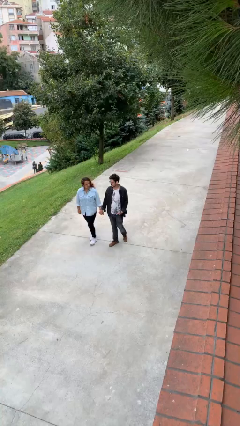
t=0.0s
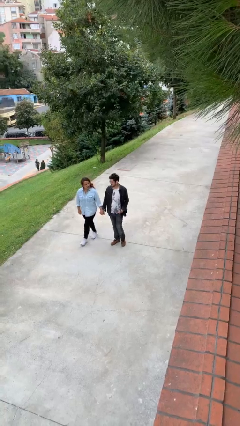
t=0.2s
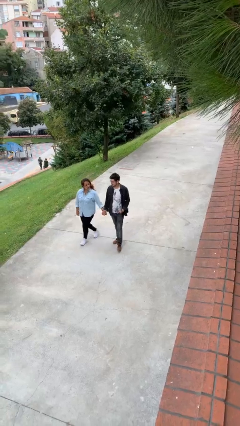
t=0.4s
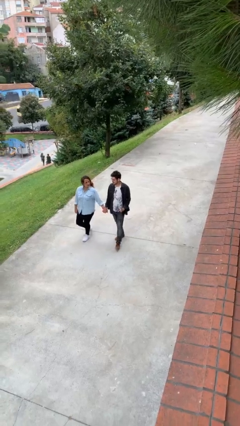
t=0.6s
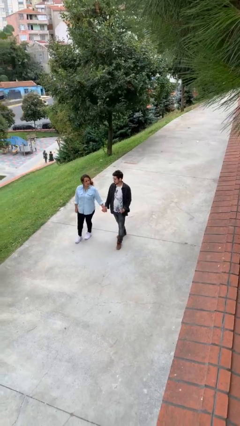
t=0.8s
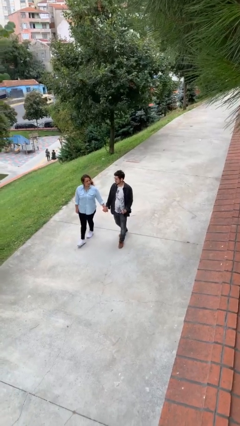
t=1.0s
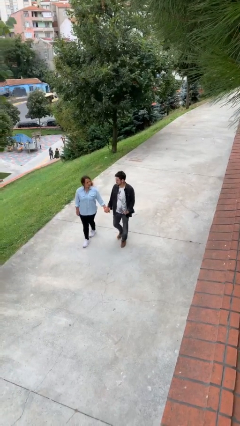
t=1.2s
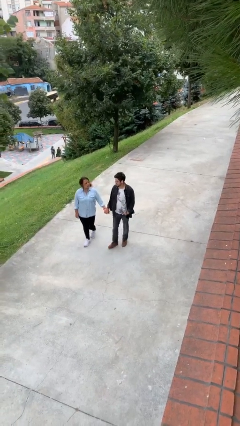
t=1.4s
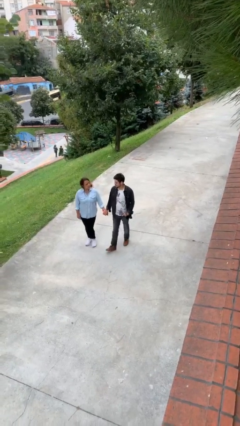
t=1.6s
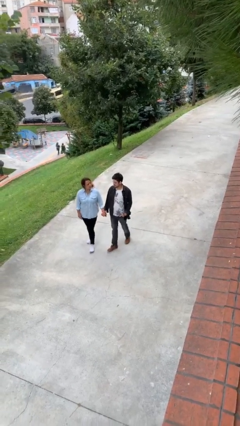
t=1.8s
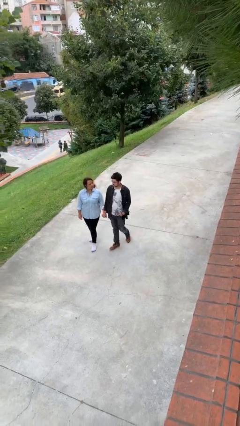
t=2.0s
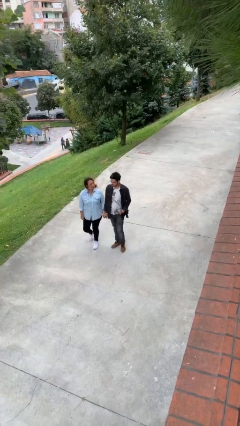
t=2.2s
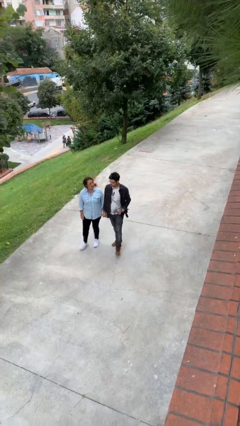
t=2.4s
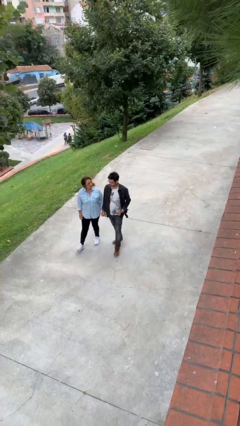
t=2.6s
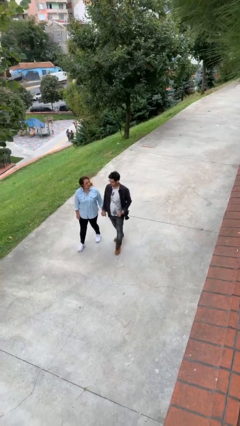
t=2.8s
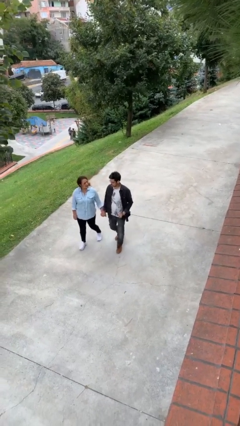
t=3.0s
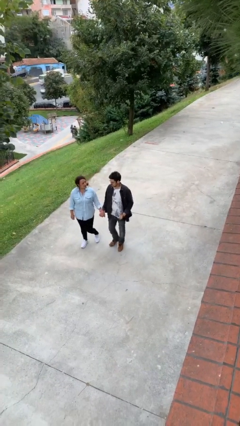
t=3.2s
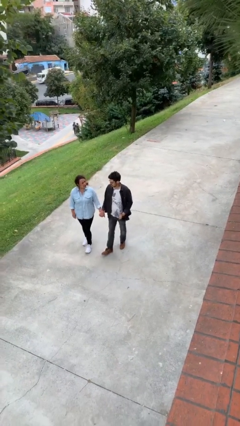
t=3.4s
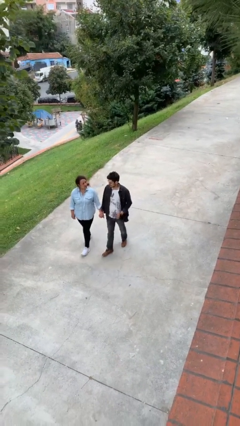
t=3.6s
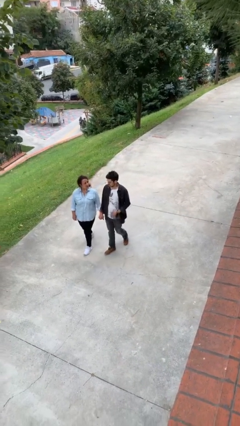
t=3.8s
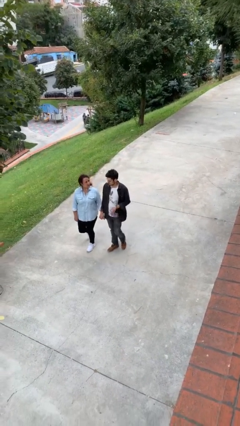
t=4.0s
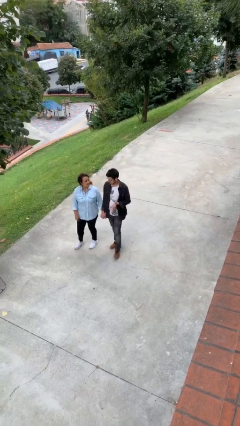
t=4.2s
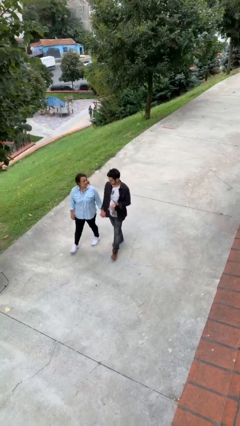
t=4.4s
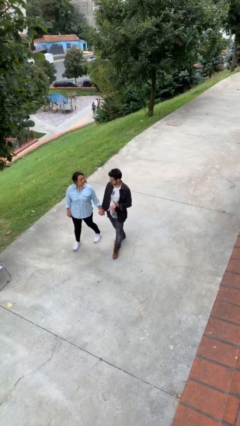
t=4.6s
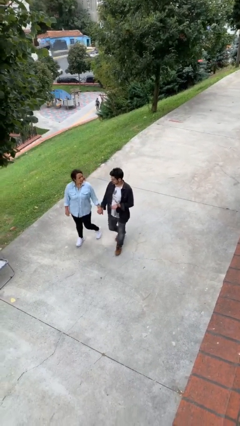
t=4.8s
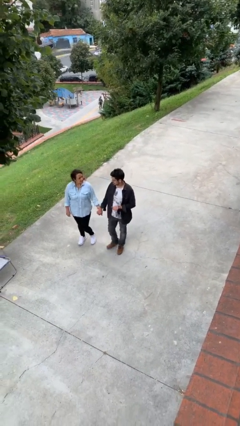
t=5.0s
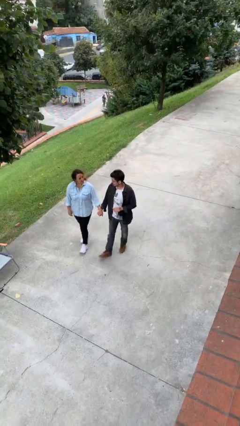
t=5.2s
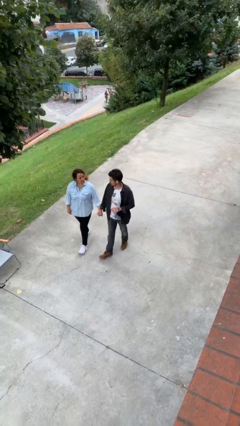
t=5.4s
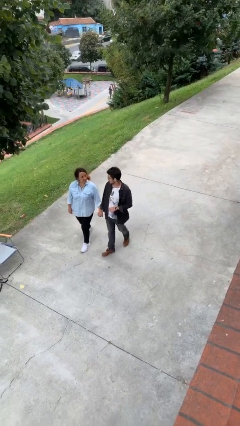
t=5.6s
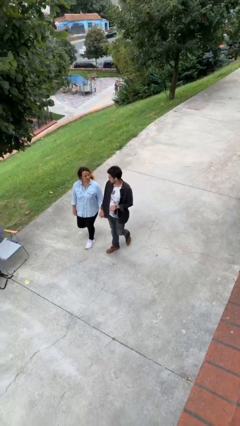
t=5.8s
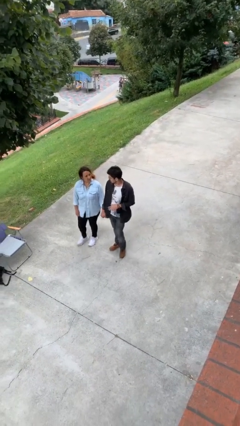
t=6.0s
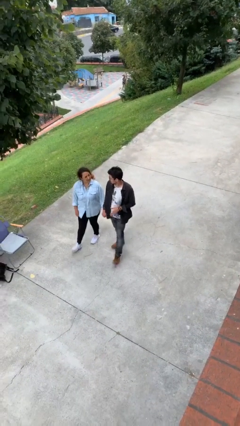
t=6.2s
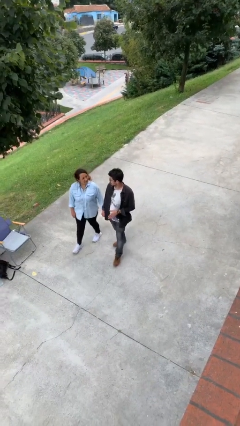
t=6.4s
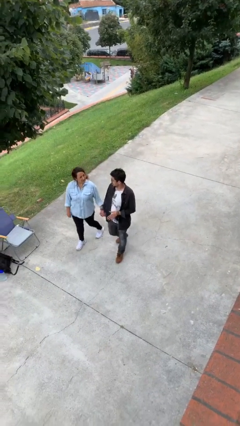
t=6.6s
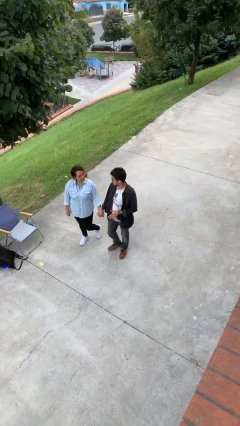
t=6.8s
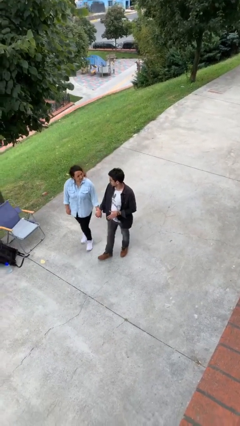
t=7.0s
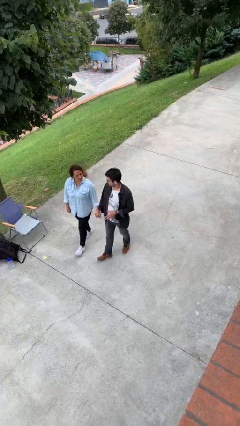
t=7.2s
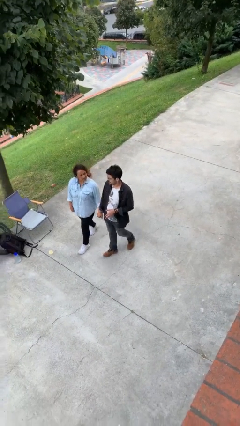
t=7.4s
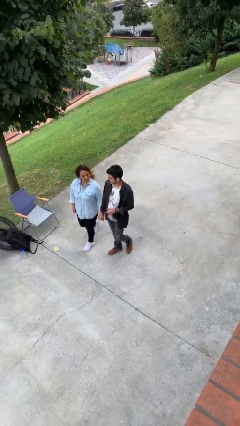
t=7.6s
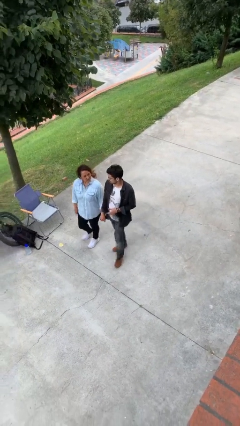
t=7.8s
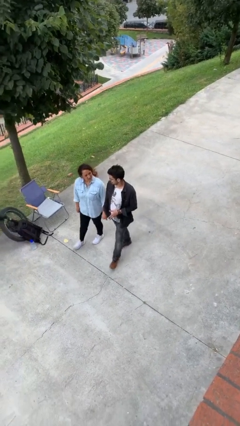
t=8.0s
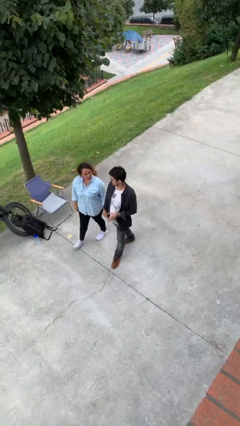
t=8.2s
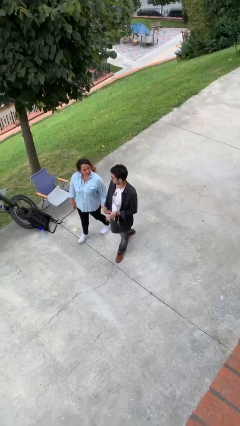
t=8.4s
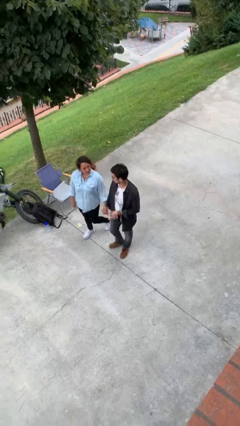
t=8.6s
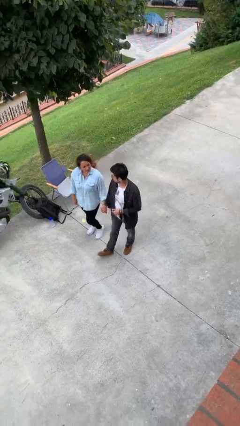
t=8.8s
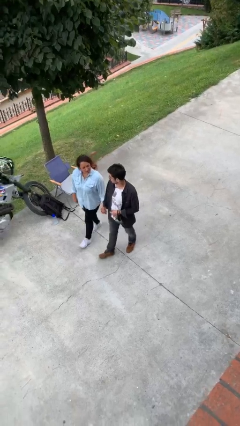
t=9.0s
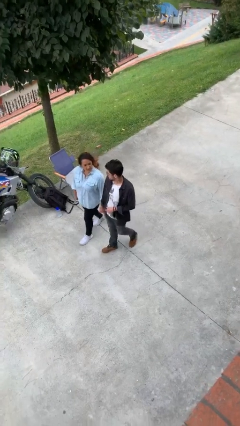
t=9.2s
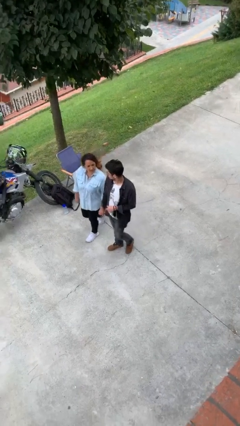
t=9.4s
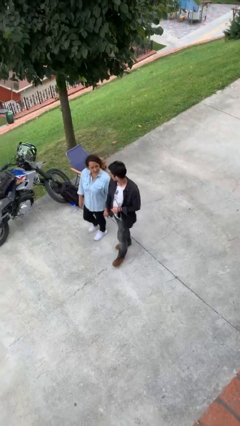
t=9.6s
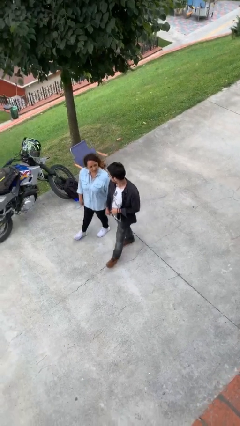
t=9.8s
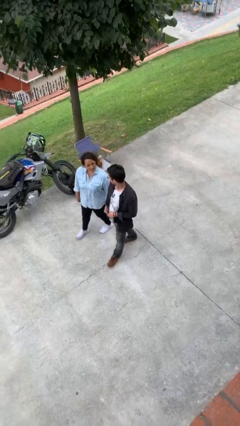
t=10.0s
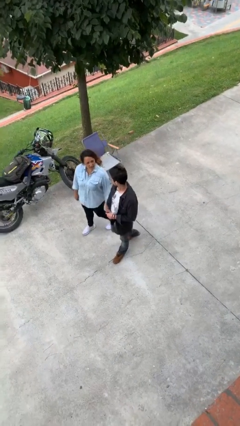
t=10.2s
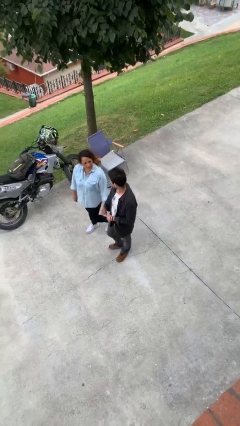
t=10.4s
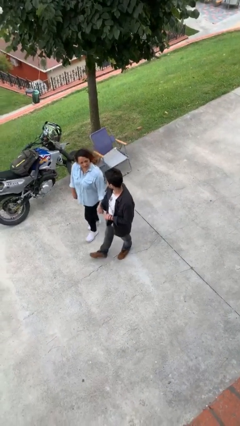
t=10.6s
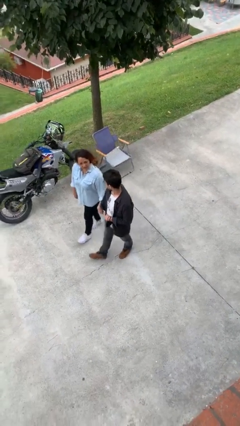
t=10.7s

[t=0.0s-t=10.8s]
person holds hand

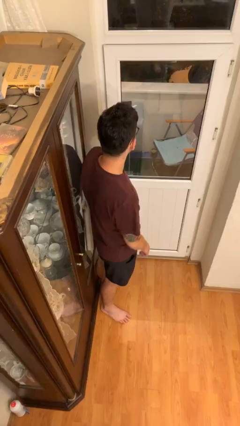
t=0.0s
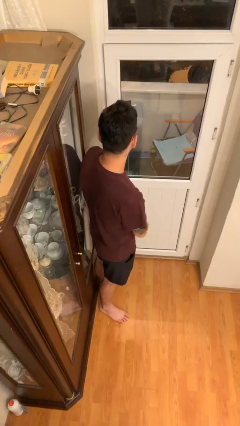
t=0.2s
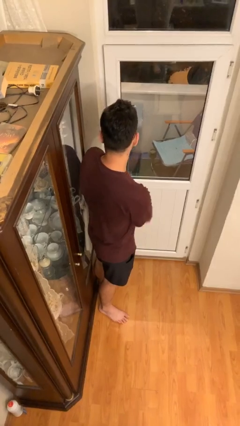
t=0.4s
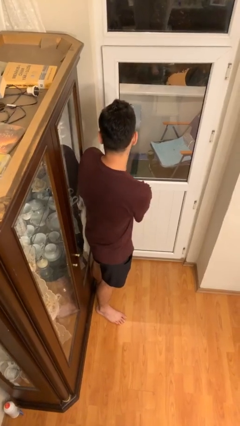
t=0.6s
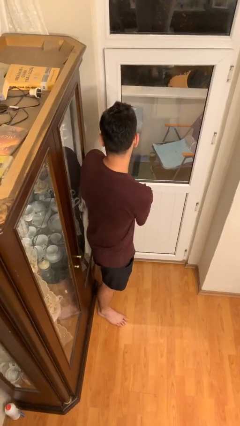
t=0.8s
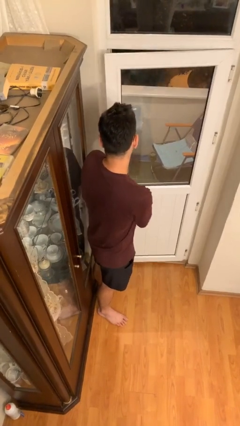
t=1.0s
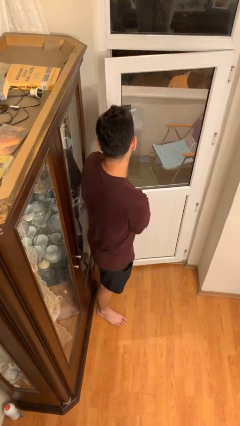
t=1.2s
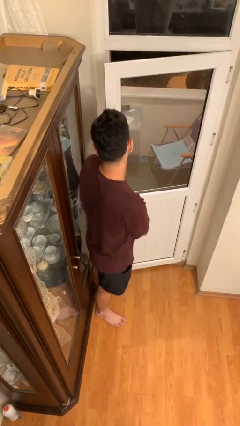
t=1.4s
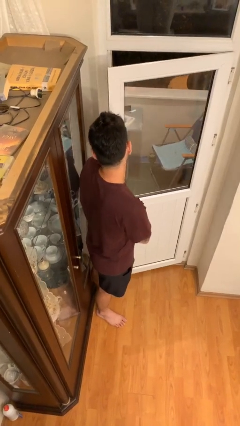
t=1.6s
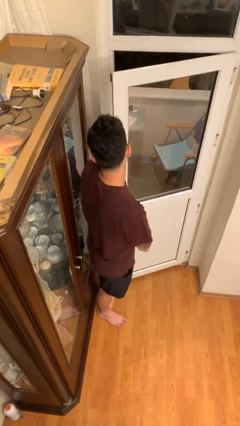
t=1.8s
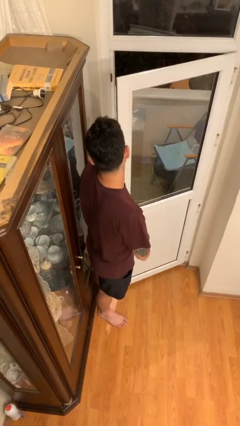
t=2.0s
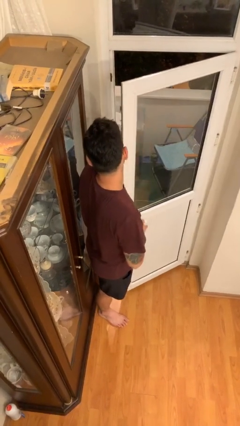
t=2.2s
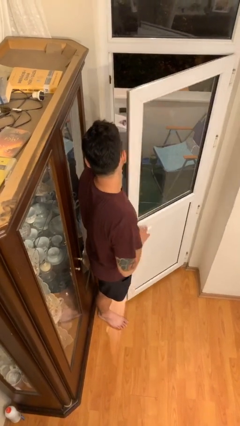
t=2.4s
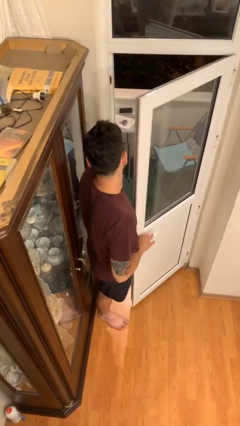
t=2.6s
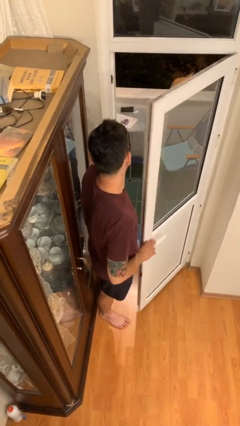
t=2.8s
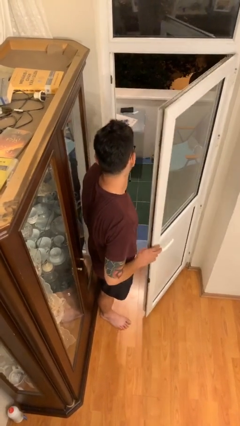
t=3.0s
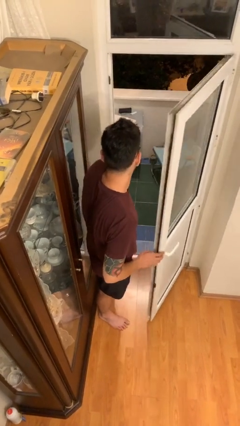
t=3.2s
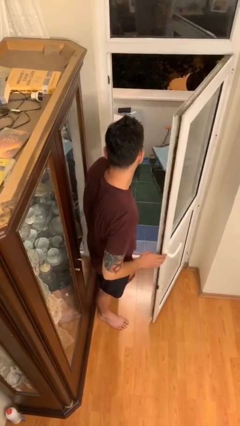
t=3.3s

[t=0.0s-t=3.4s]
person opens facility door

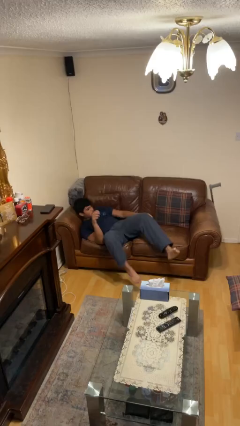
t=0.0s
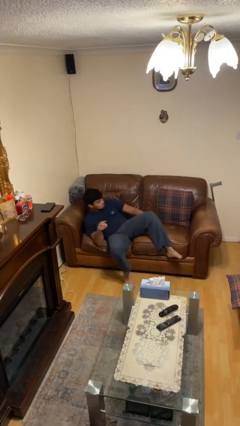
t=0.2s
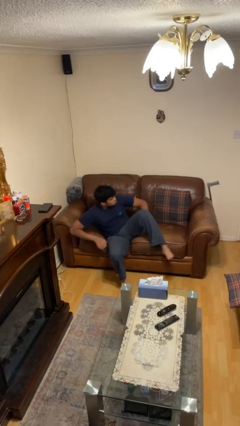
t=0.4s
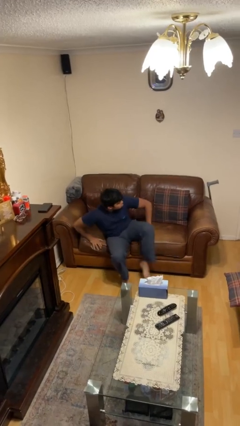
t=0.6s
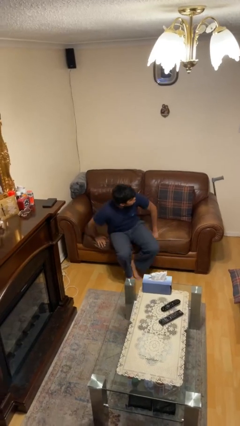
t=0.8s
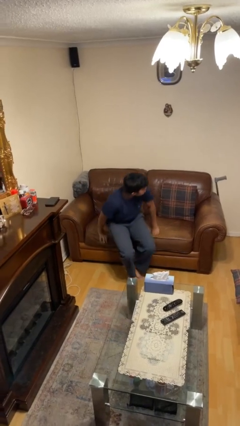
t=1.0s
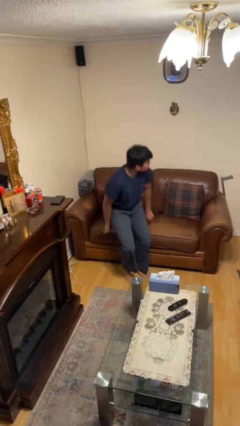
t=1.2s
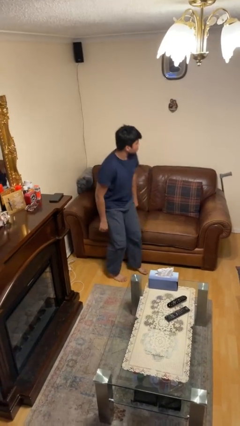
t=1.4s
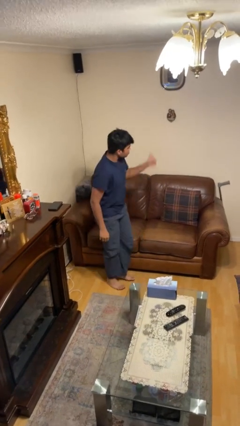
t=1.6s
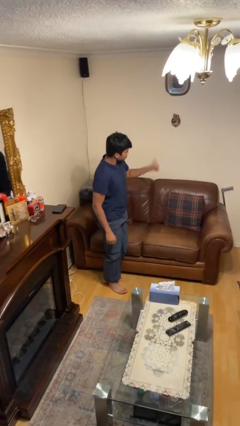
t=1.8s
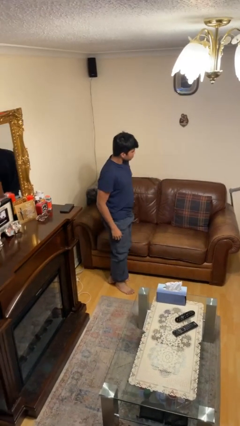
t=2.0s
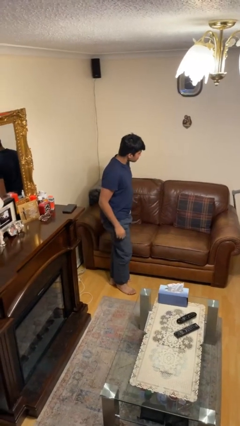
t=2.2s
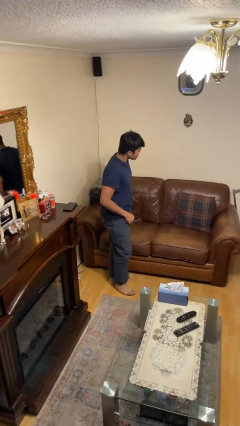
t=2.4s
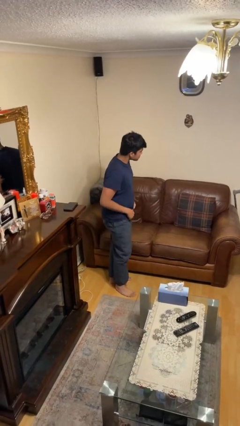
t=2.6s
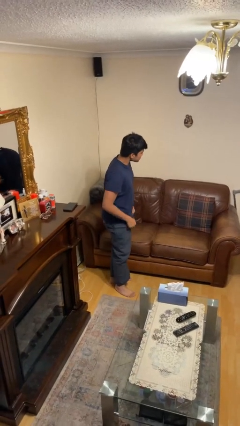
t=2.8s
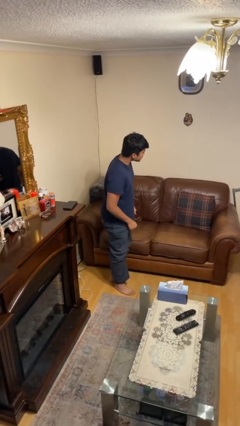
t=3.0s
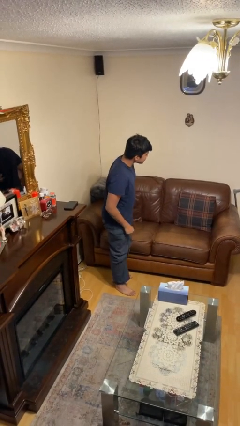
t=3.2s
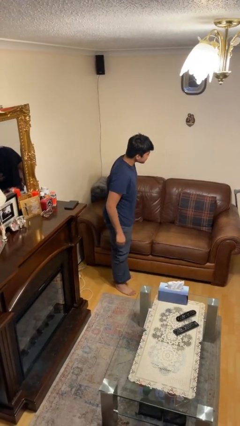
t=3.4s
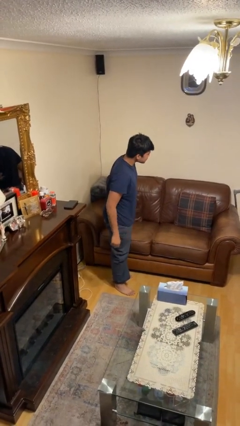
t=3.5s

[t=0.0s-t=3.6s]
person stands up

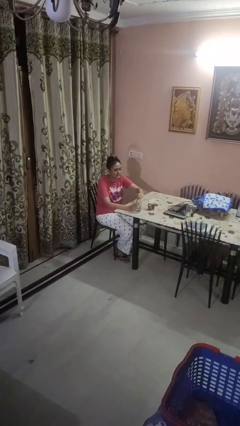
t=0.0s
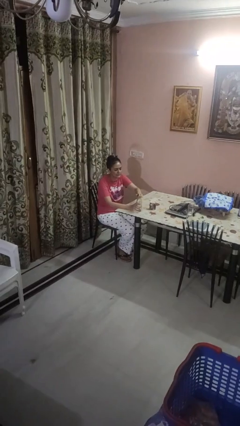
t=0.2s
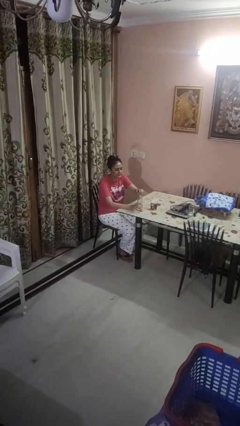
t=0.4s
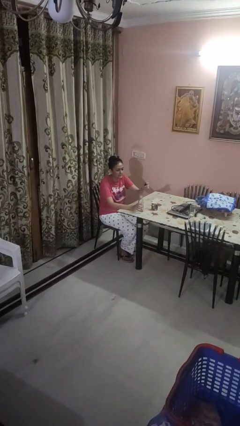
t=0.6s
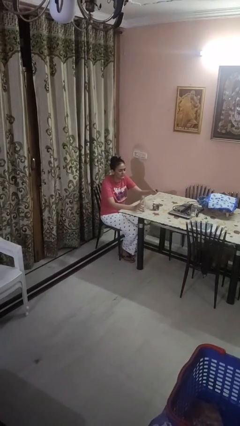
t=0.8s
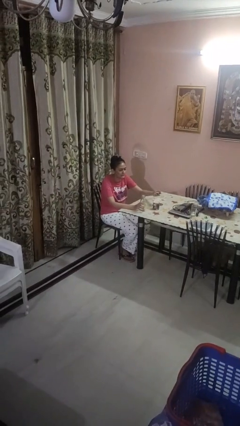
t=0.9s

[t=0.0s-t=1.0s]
person unscrews lid from bottle
